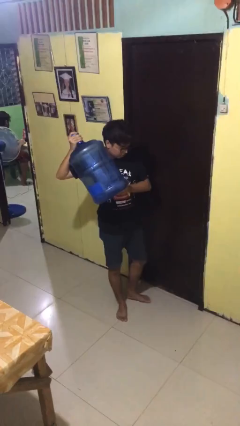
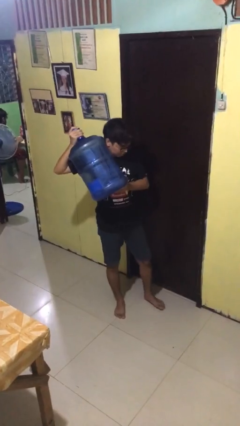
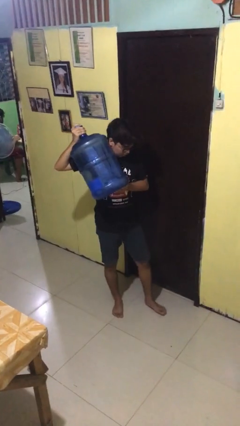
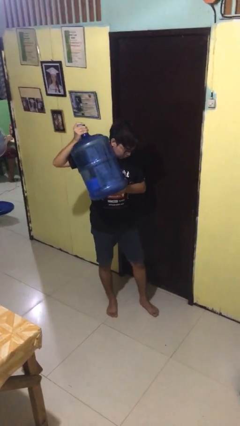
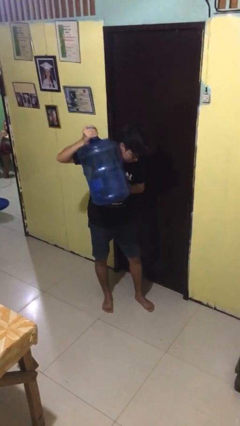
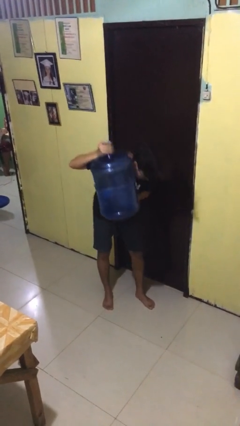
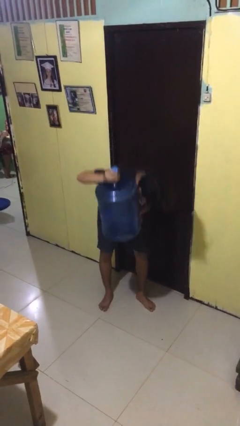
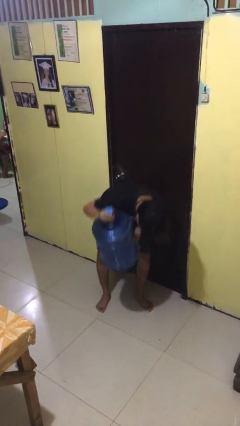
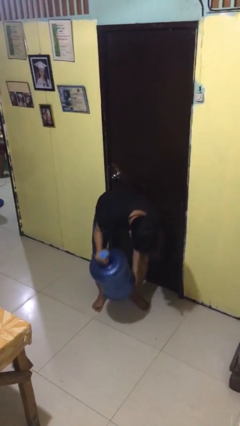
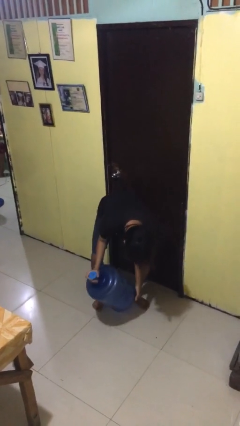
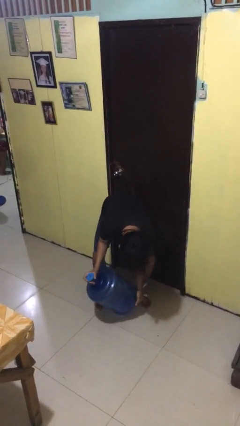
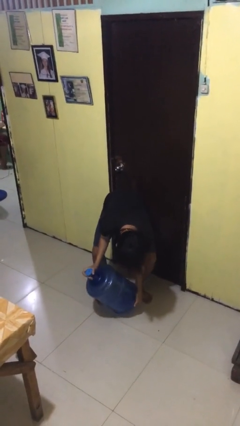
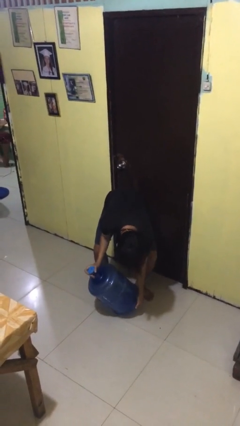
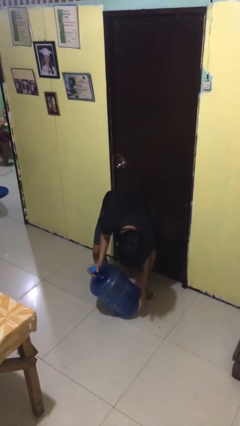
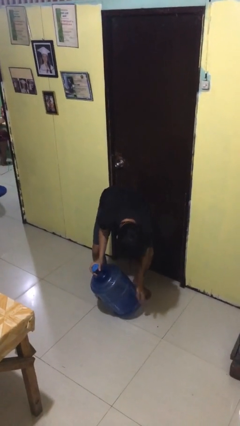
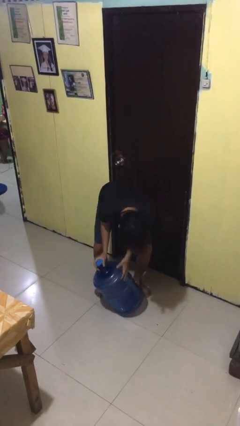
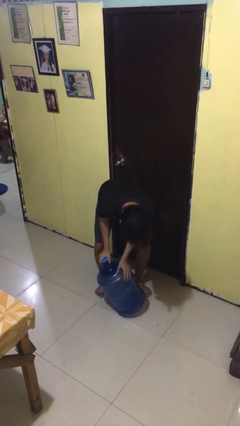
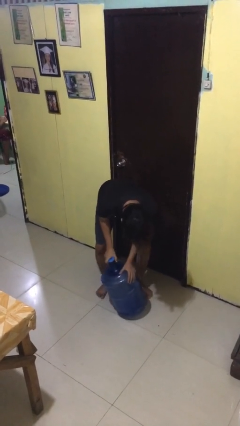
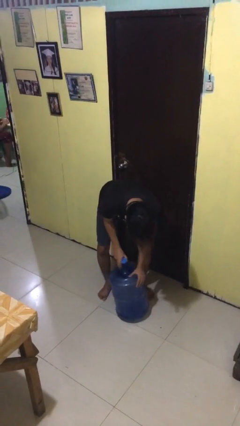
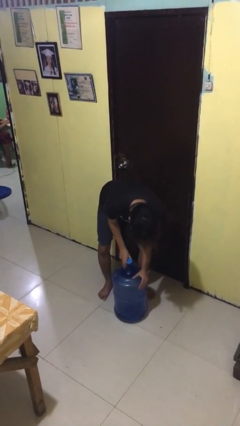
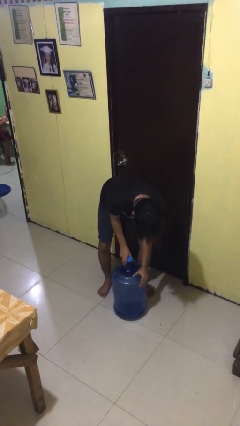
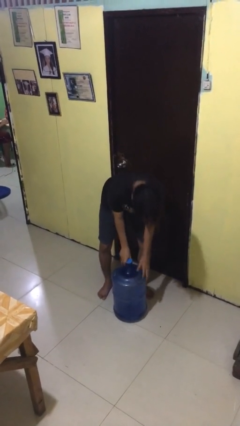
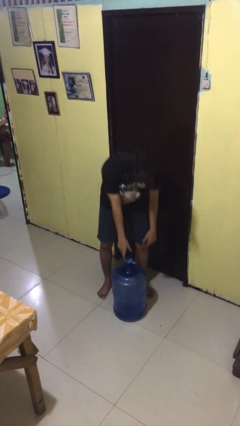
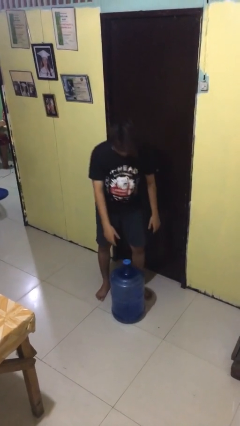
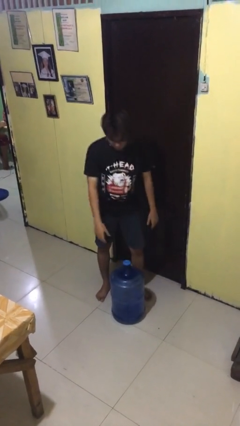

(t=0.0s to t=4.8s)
person puts down object on floor

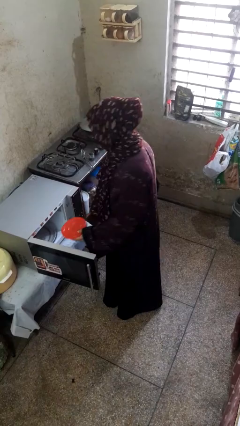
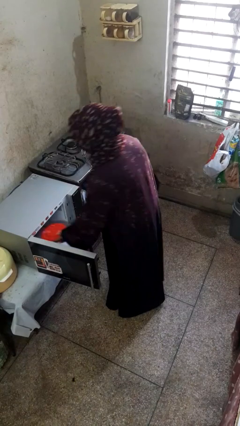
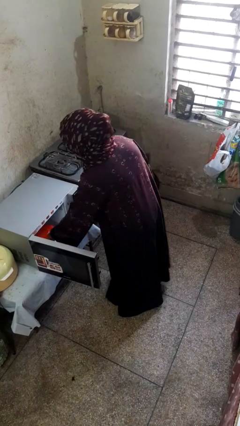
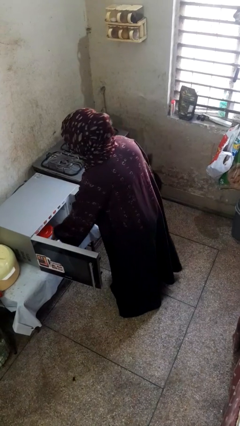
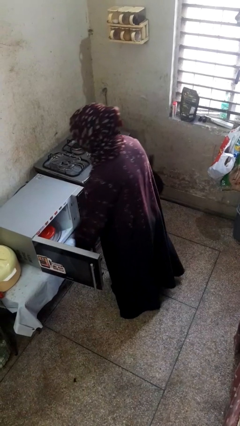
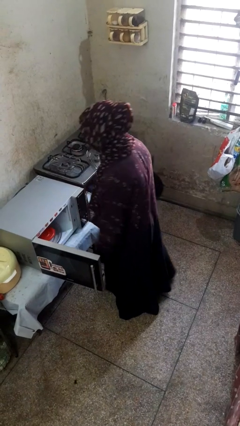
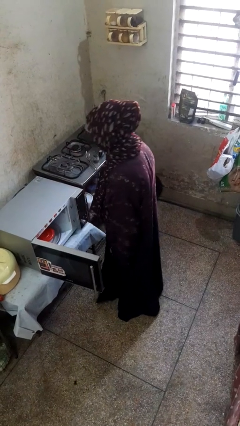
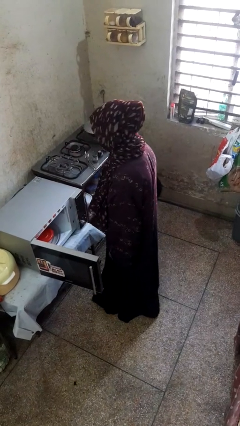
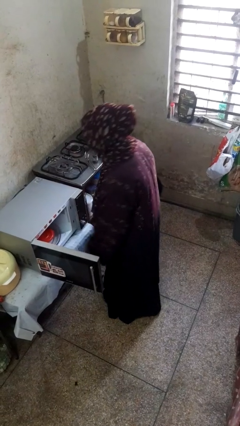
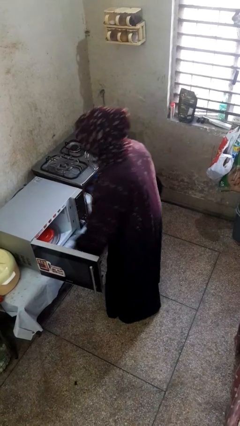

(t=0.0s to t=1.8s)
person puts object into microwave

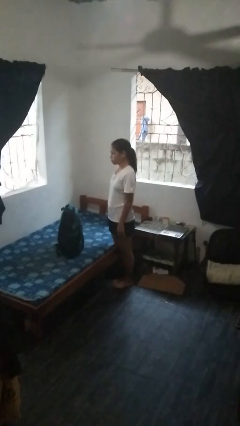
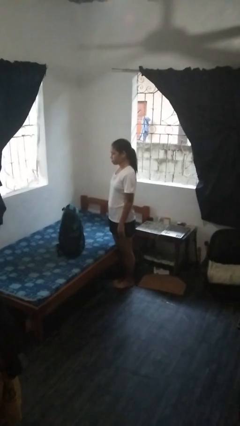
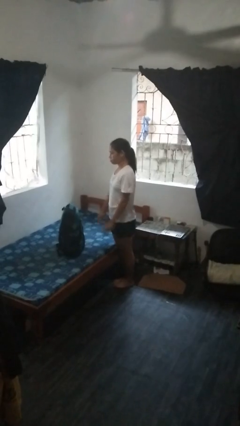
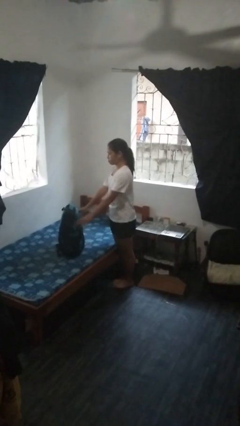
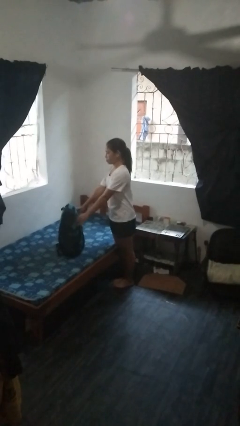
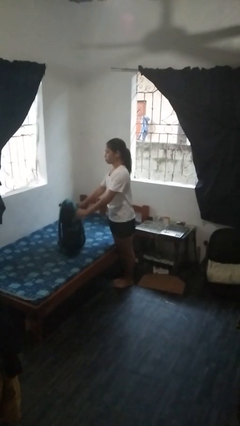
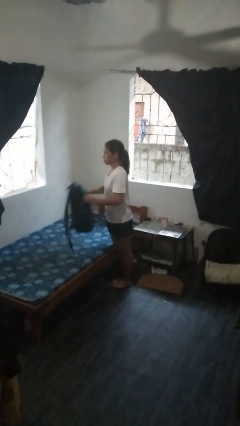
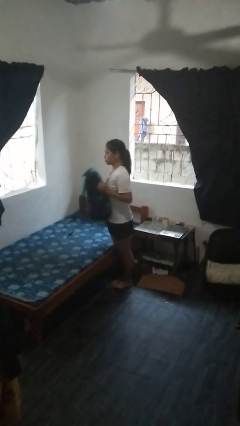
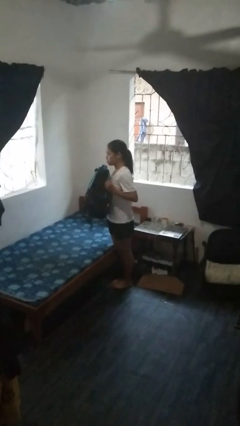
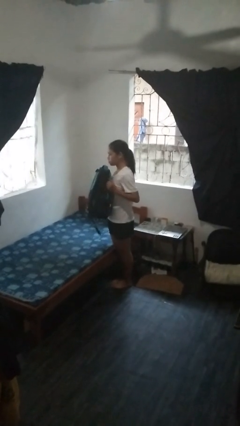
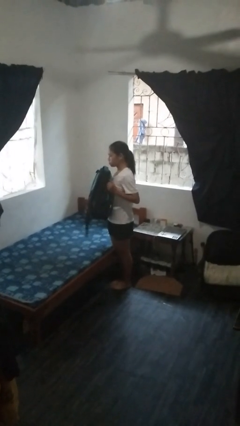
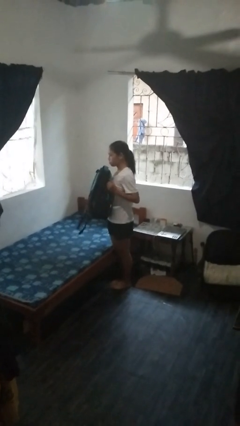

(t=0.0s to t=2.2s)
person picks up object from bed

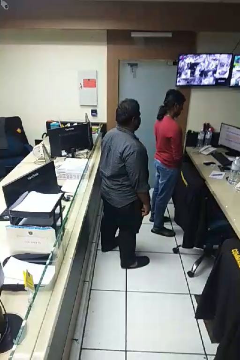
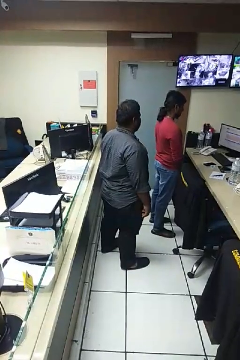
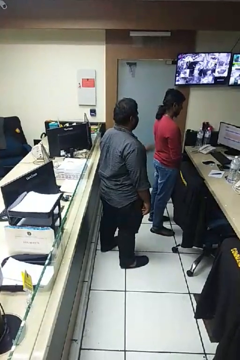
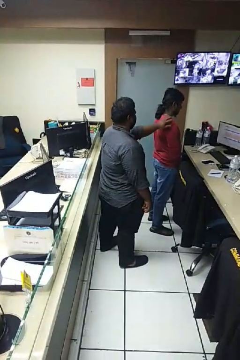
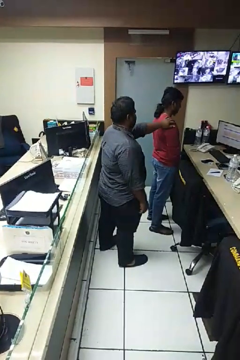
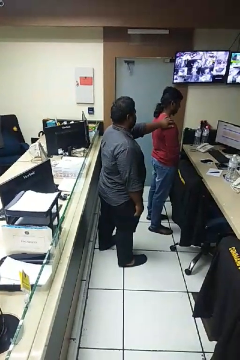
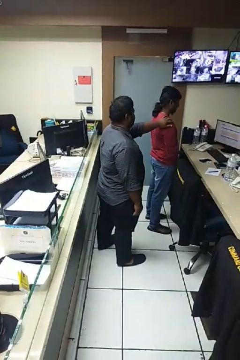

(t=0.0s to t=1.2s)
person grabs person by shoulder

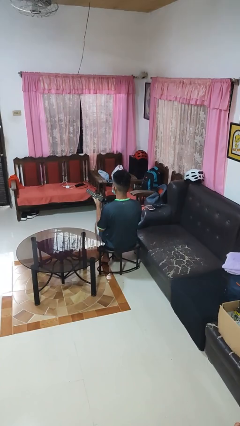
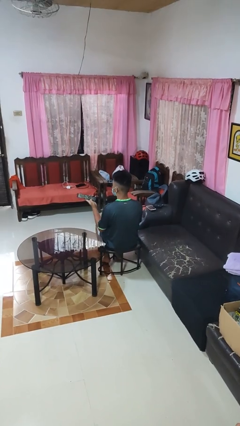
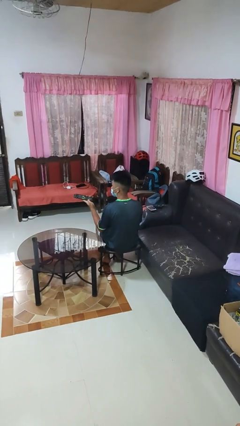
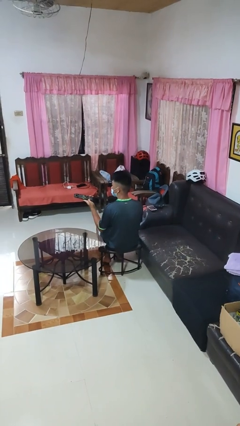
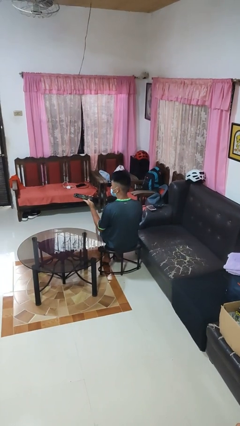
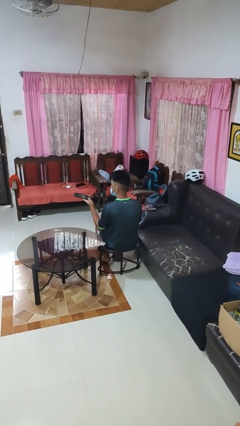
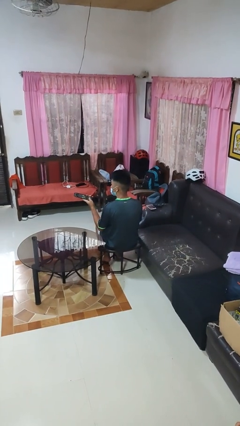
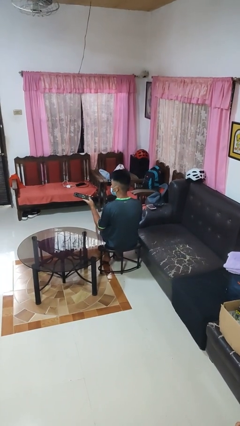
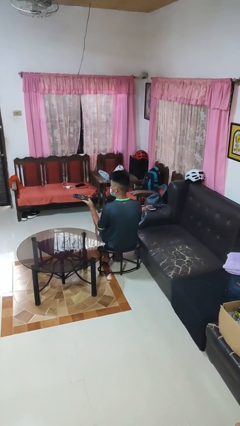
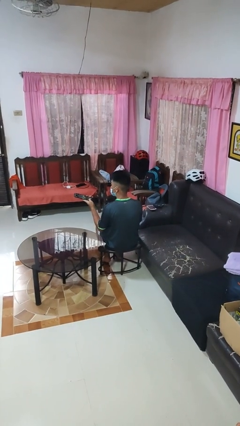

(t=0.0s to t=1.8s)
person uses television remote

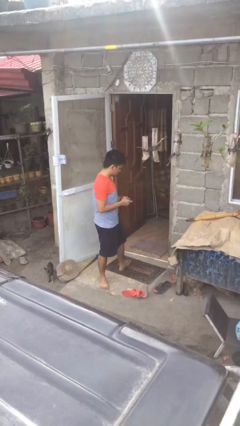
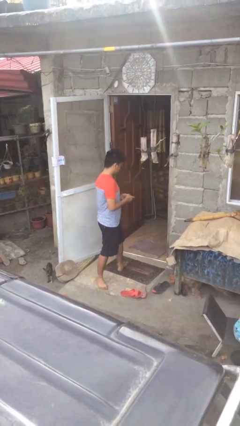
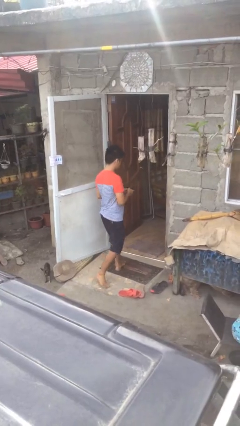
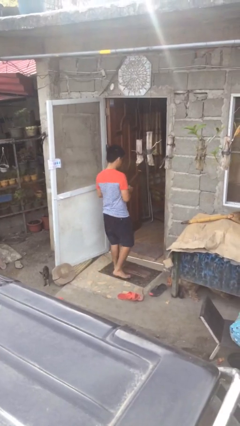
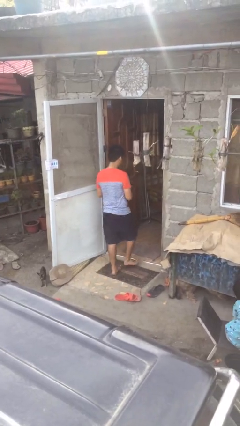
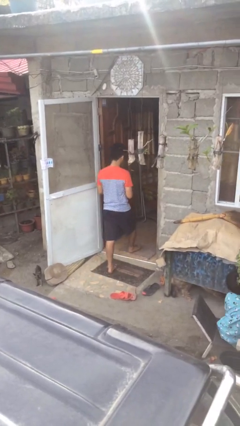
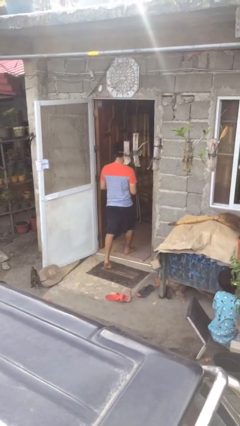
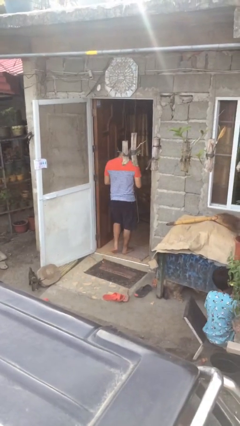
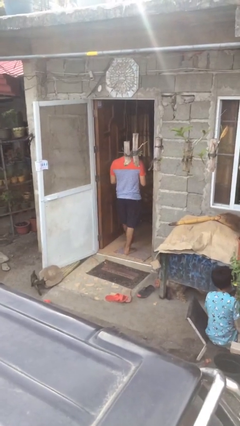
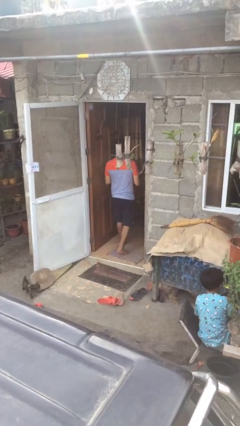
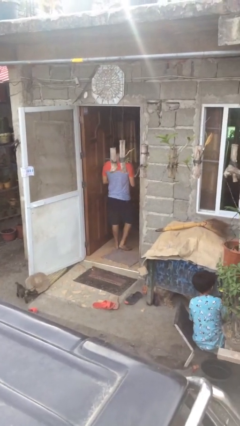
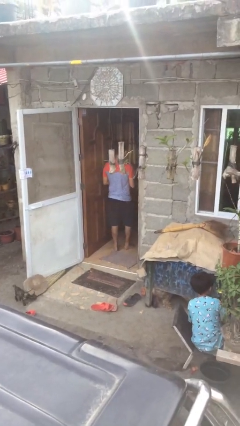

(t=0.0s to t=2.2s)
person exits scene through structure

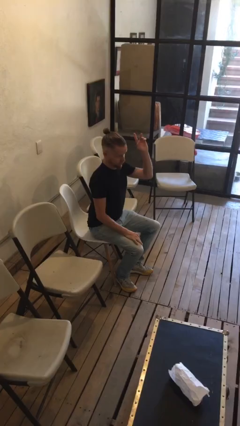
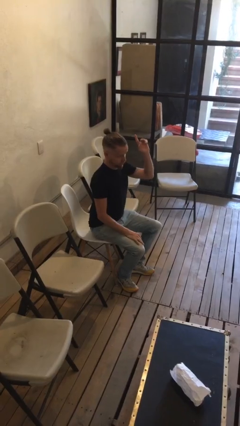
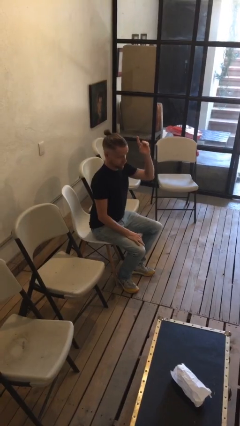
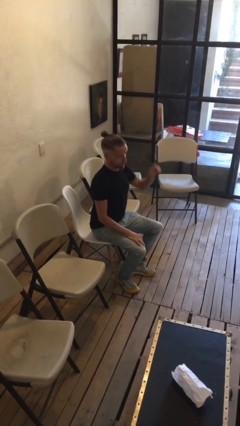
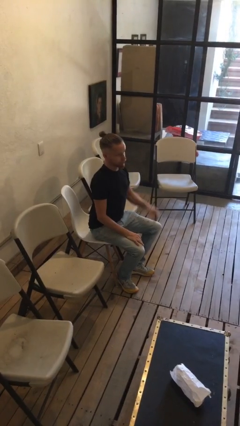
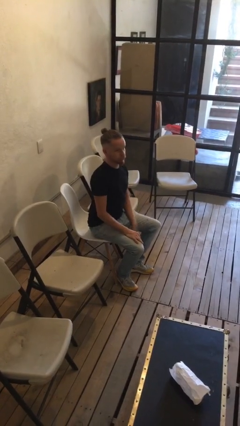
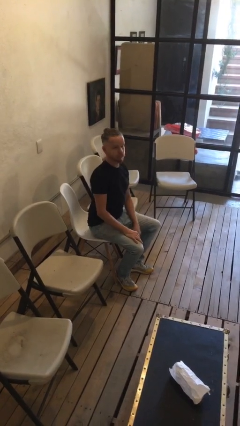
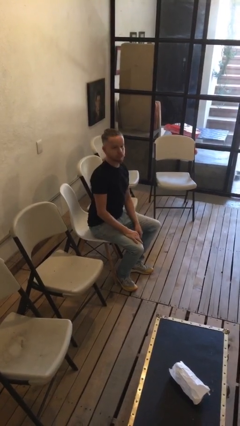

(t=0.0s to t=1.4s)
person gestures lower hand

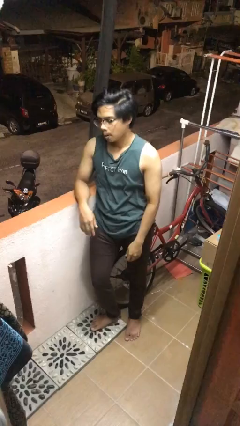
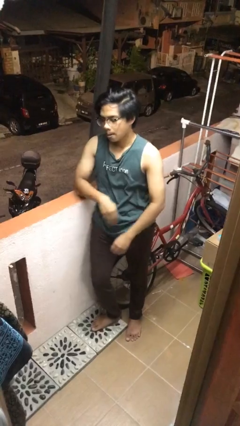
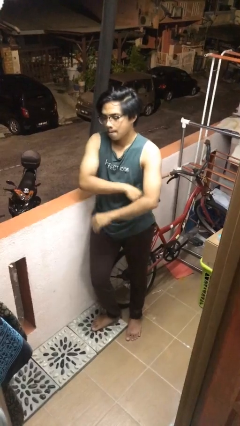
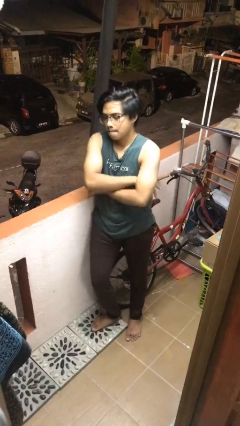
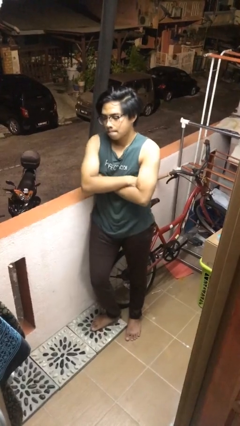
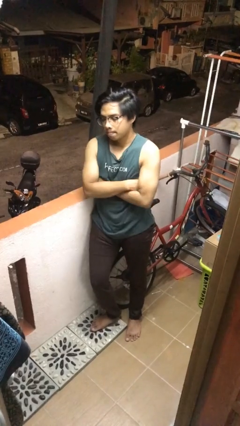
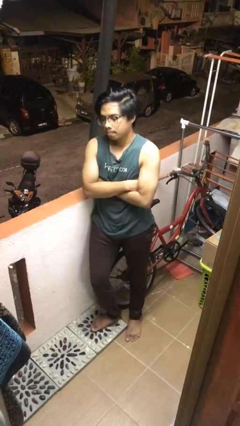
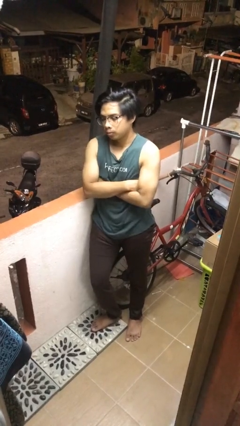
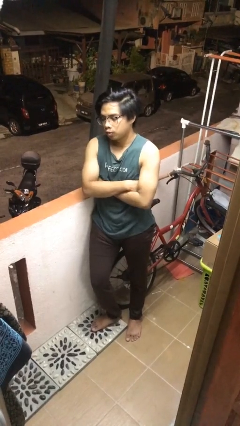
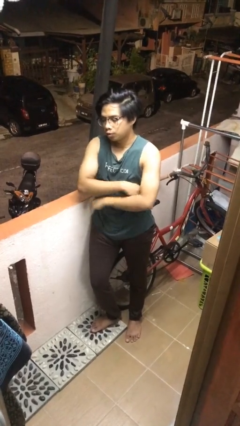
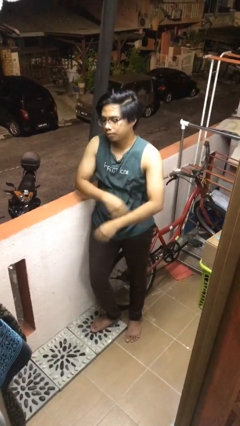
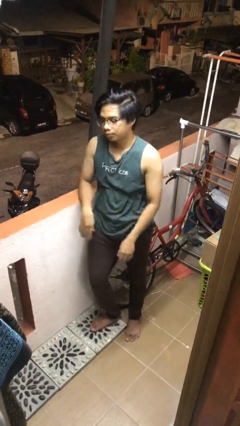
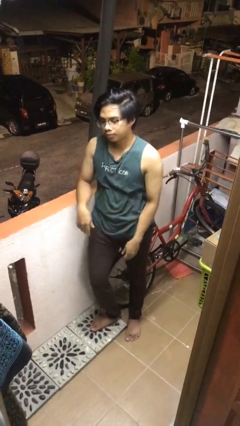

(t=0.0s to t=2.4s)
person crosses arms
